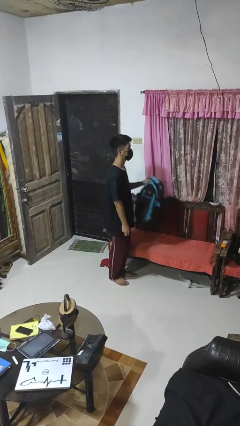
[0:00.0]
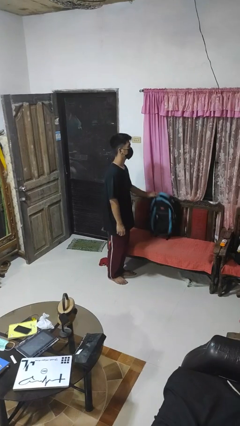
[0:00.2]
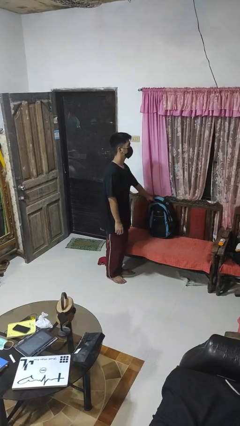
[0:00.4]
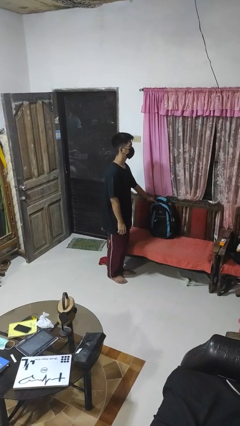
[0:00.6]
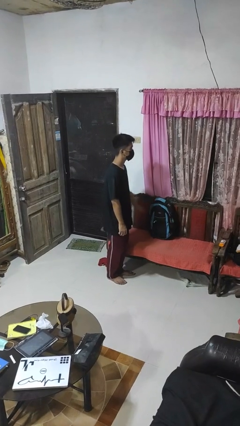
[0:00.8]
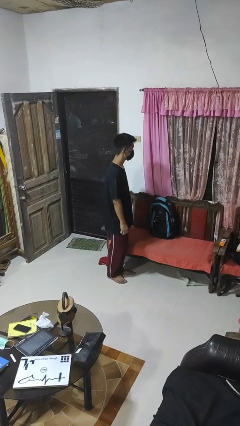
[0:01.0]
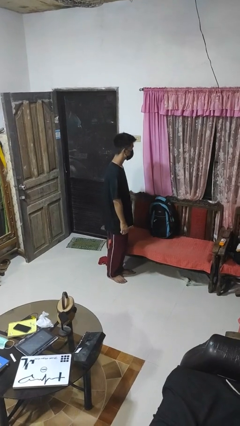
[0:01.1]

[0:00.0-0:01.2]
person puts down object on couch

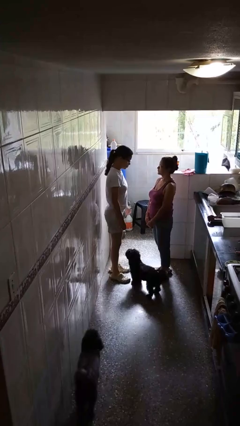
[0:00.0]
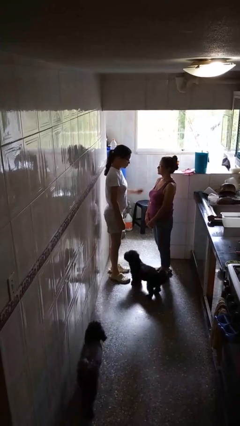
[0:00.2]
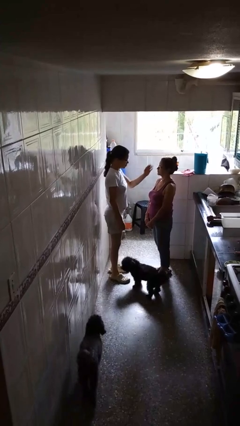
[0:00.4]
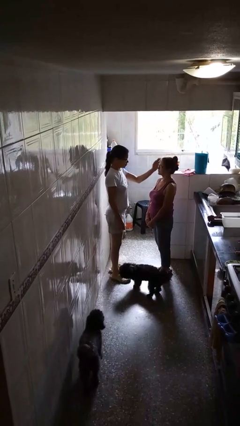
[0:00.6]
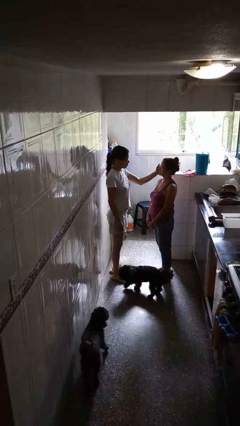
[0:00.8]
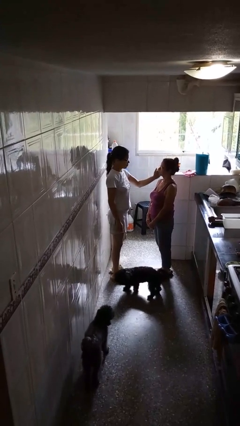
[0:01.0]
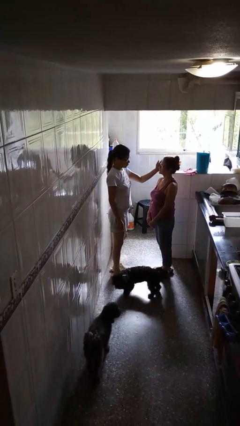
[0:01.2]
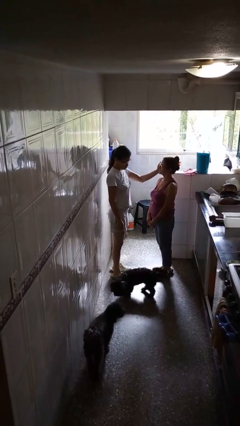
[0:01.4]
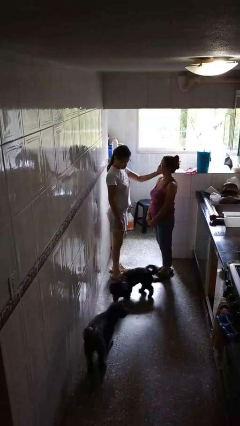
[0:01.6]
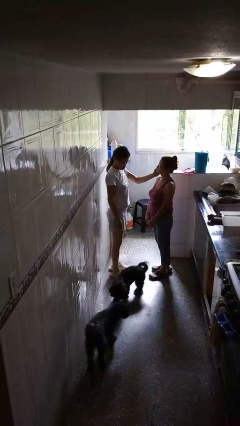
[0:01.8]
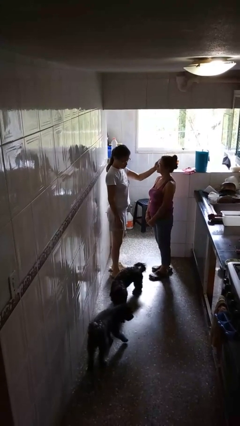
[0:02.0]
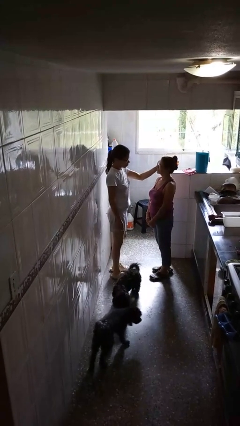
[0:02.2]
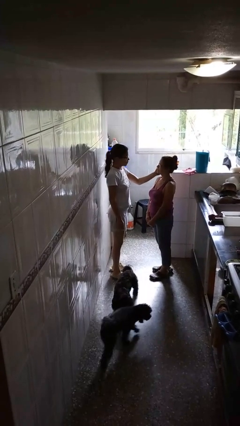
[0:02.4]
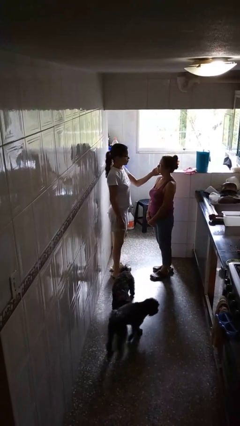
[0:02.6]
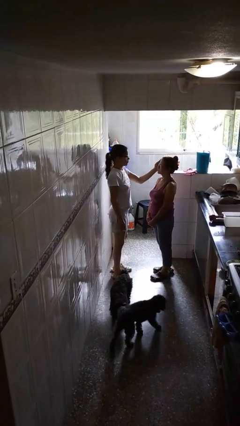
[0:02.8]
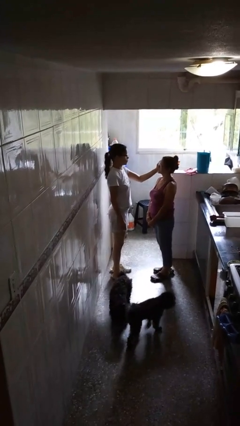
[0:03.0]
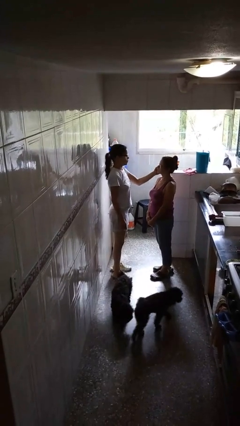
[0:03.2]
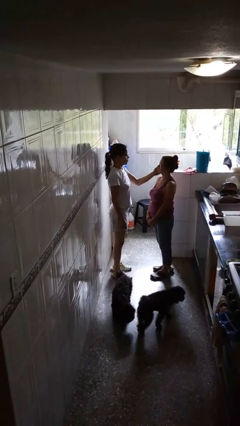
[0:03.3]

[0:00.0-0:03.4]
person touches face of person

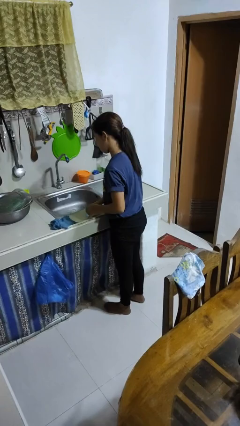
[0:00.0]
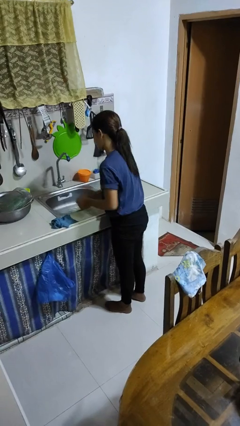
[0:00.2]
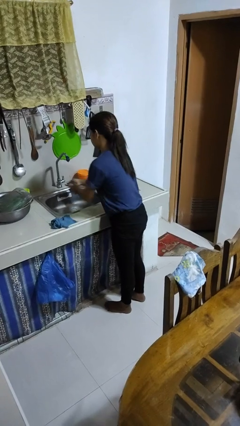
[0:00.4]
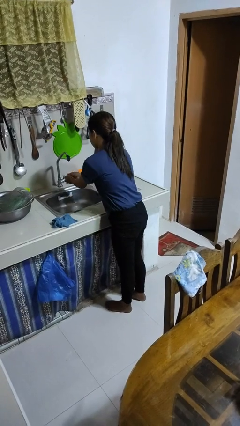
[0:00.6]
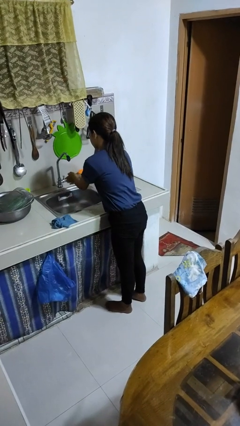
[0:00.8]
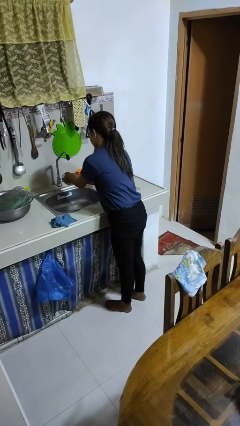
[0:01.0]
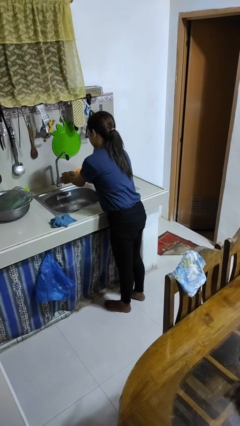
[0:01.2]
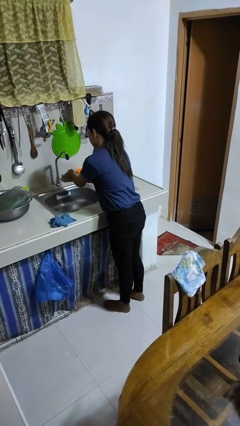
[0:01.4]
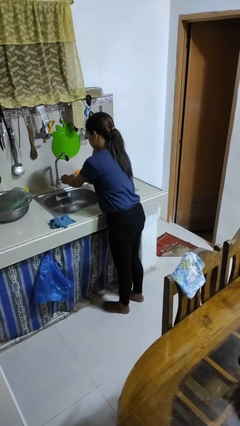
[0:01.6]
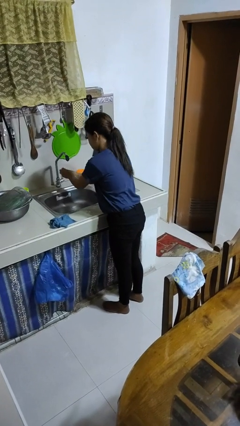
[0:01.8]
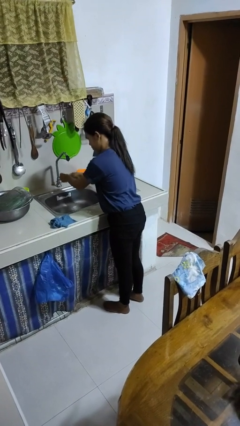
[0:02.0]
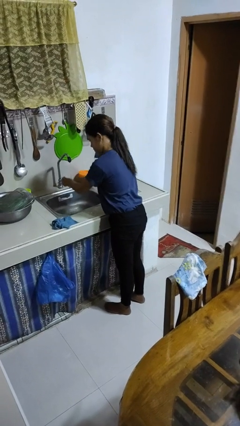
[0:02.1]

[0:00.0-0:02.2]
person washes hands

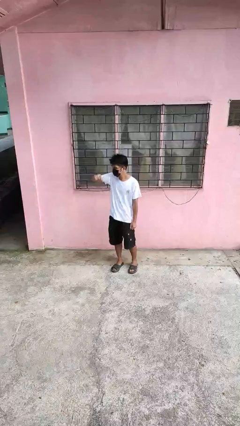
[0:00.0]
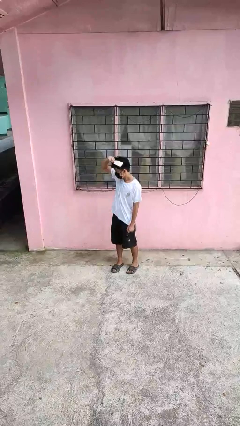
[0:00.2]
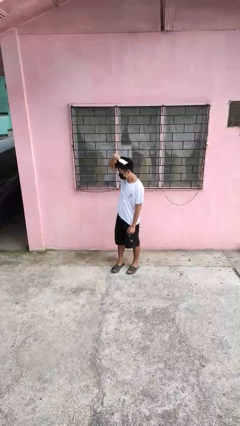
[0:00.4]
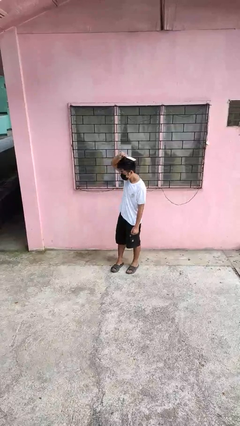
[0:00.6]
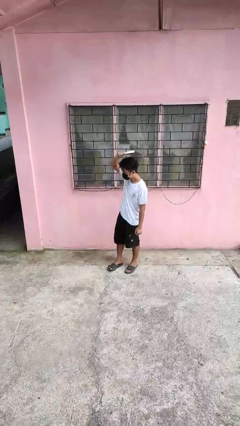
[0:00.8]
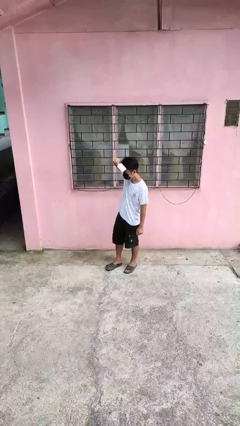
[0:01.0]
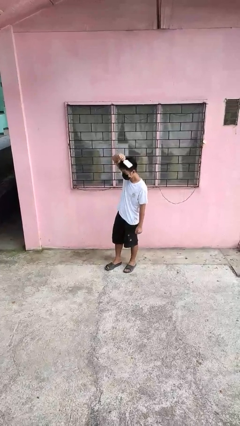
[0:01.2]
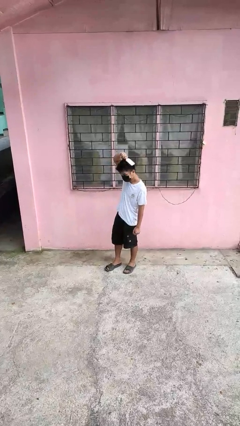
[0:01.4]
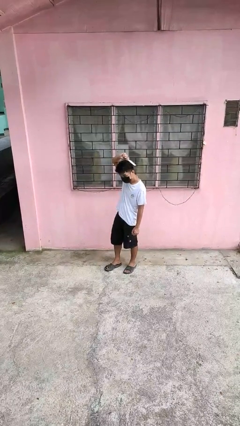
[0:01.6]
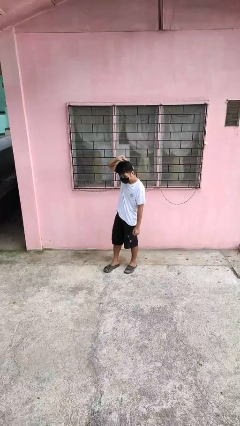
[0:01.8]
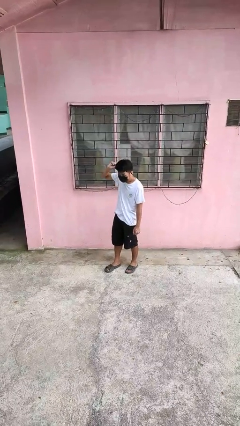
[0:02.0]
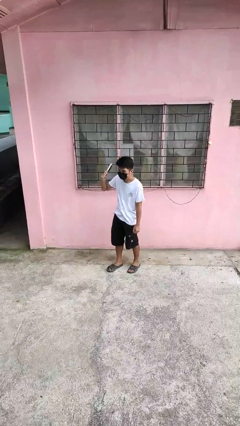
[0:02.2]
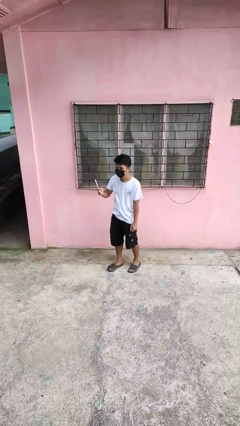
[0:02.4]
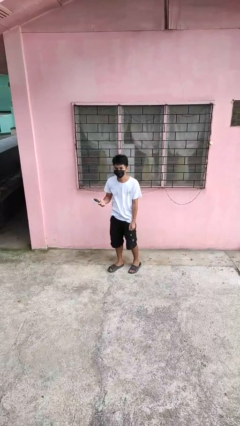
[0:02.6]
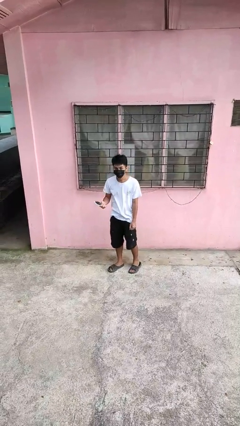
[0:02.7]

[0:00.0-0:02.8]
person brushes hair

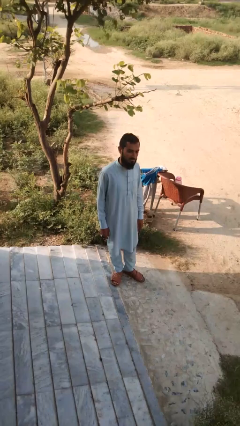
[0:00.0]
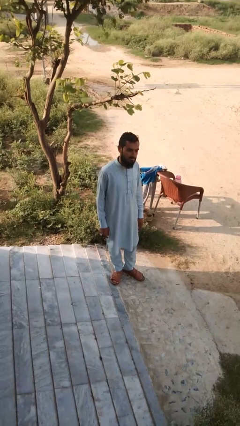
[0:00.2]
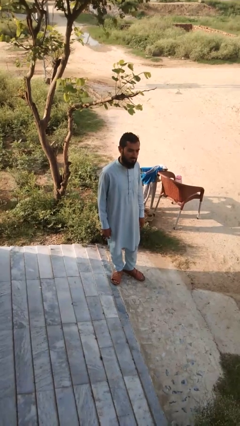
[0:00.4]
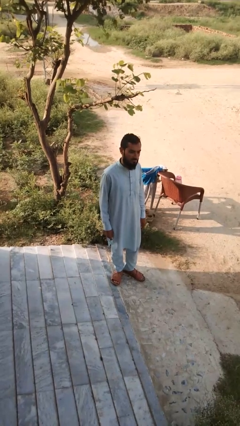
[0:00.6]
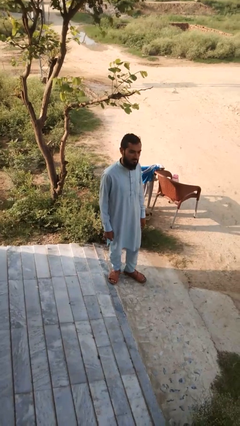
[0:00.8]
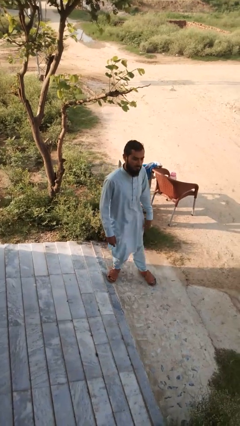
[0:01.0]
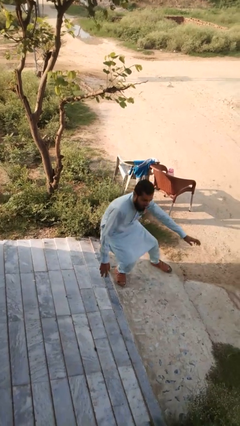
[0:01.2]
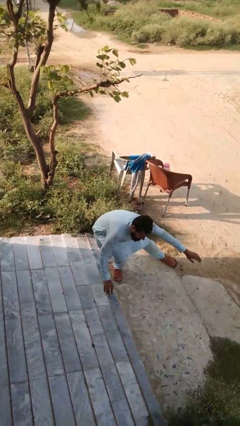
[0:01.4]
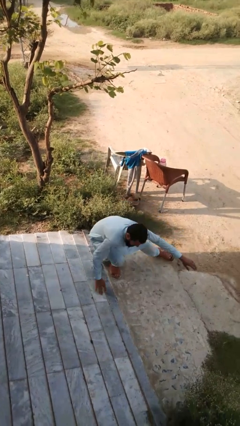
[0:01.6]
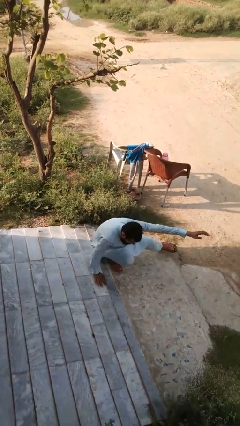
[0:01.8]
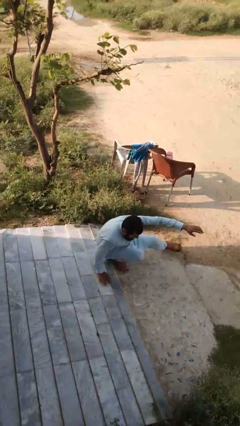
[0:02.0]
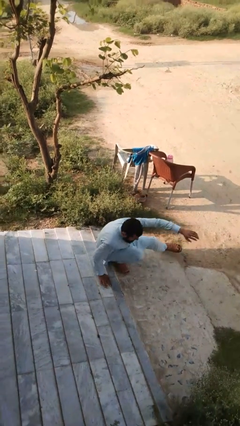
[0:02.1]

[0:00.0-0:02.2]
person trips on object on floor

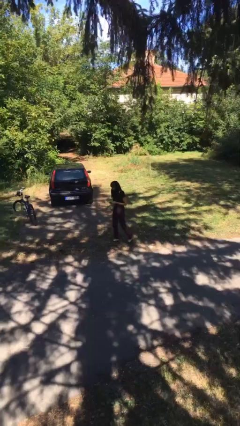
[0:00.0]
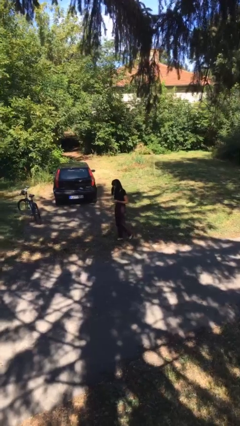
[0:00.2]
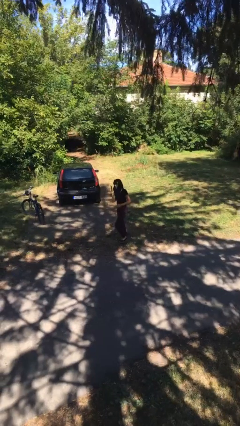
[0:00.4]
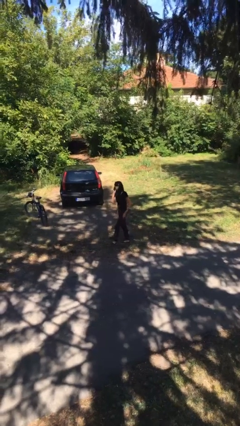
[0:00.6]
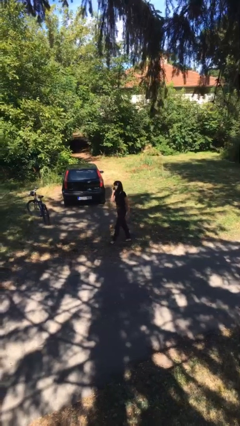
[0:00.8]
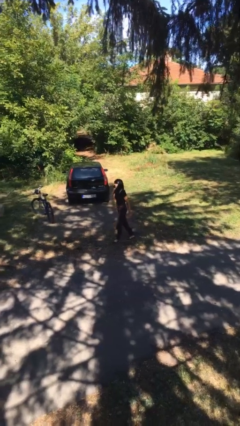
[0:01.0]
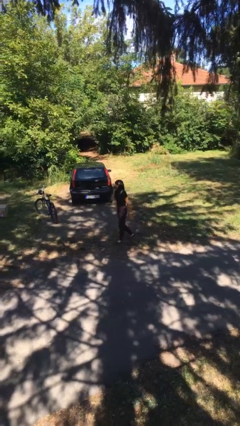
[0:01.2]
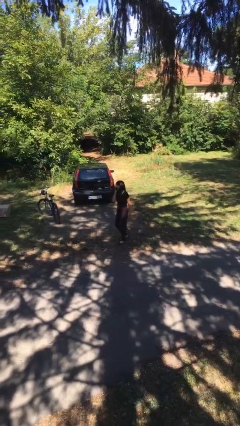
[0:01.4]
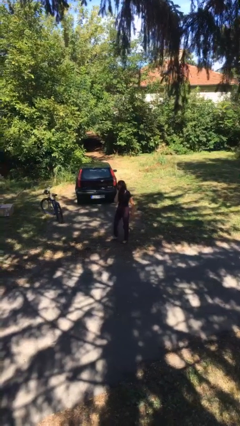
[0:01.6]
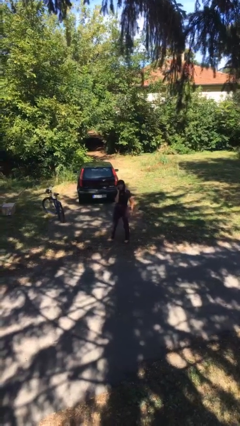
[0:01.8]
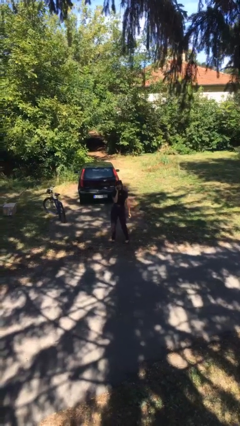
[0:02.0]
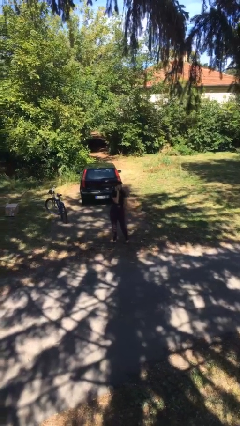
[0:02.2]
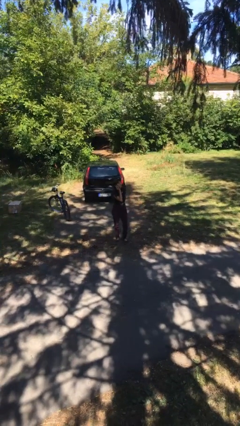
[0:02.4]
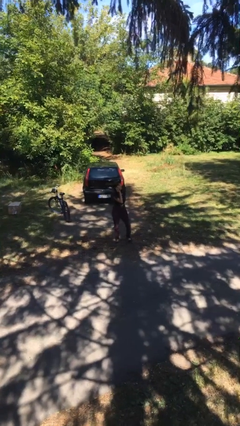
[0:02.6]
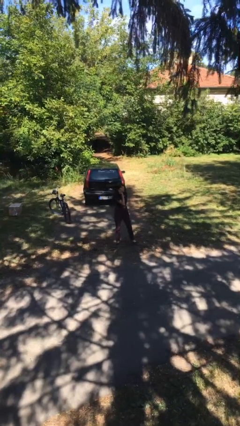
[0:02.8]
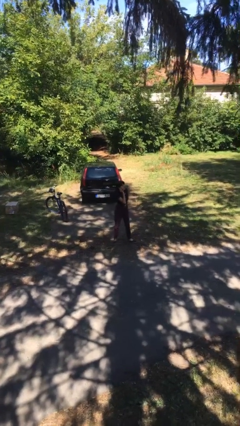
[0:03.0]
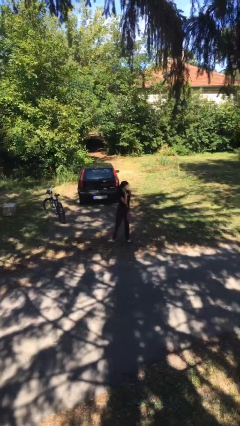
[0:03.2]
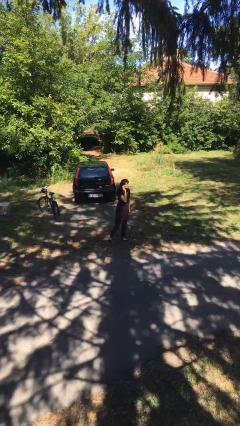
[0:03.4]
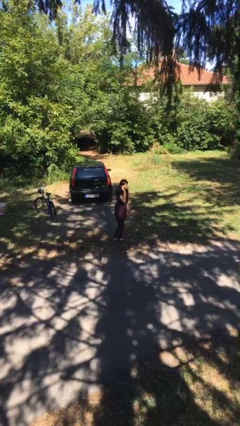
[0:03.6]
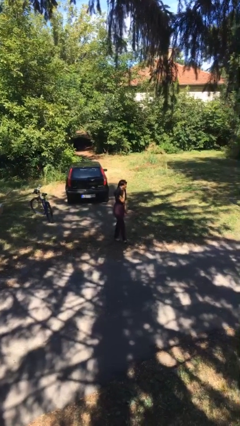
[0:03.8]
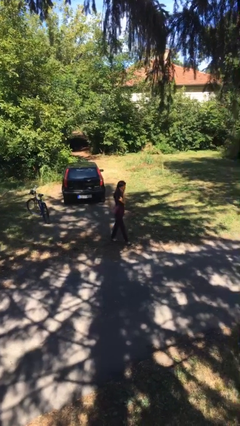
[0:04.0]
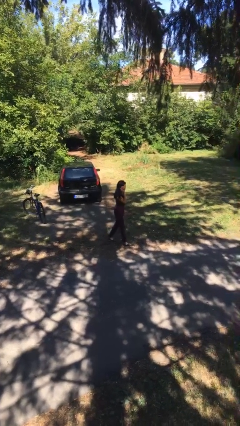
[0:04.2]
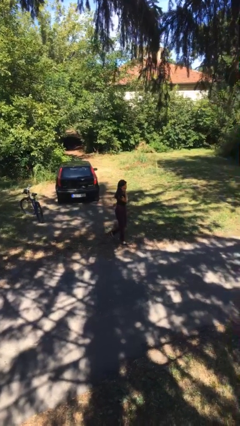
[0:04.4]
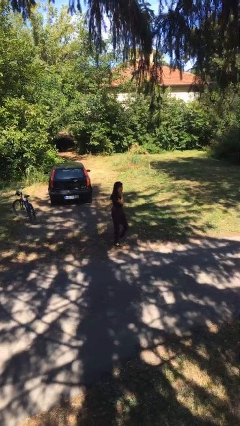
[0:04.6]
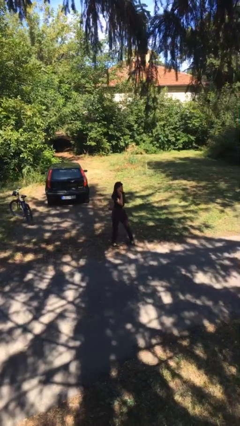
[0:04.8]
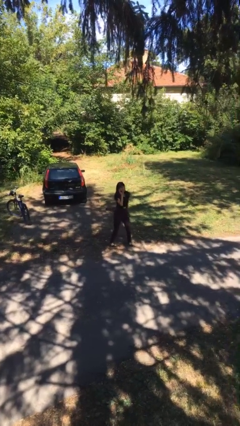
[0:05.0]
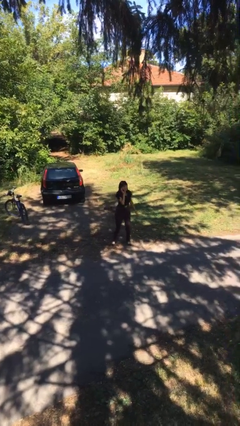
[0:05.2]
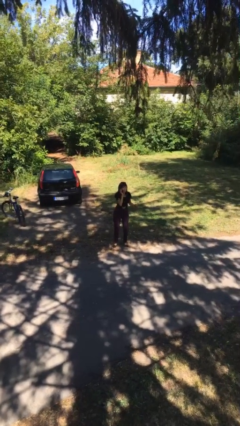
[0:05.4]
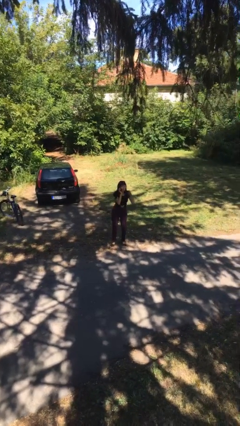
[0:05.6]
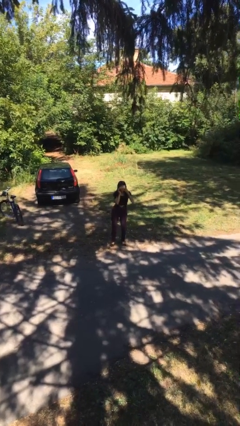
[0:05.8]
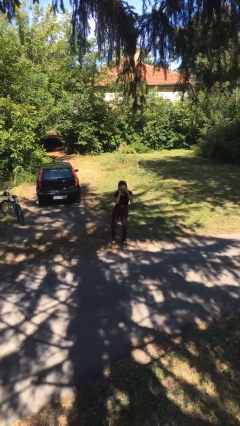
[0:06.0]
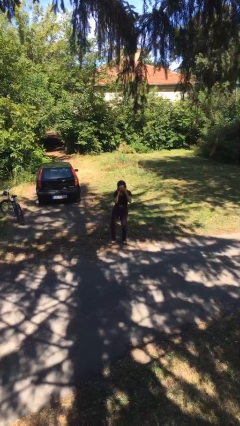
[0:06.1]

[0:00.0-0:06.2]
person talks on phone
